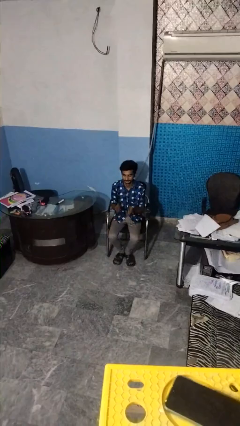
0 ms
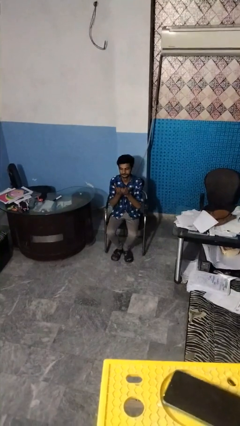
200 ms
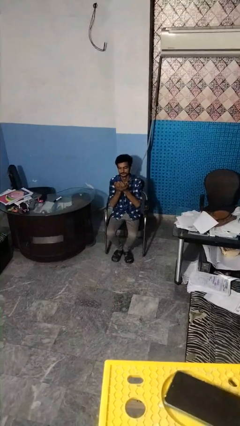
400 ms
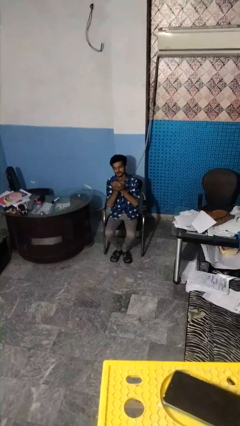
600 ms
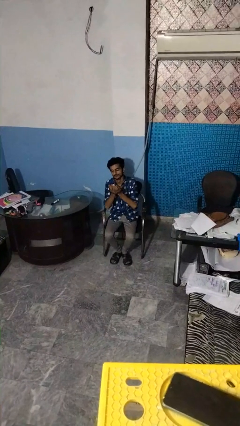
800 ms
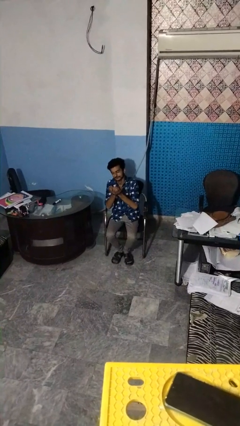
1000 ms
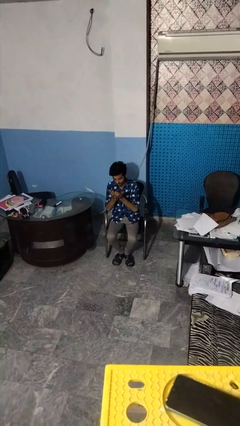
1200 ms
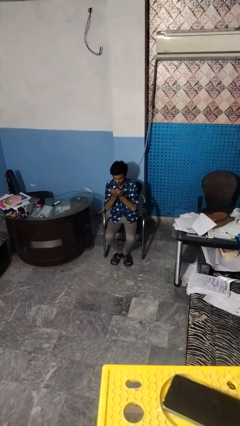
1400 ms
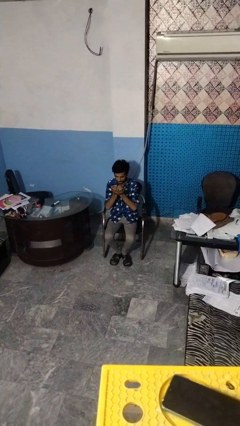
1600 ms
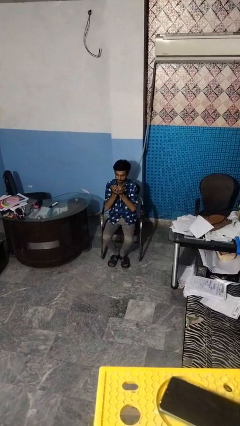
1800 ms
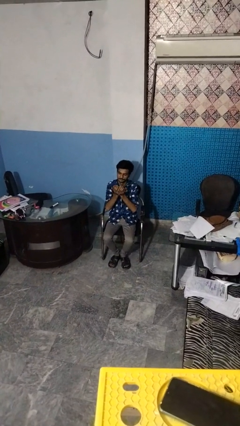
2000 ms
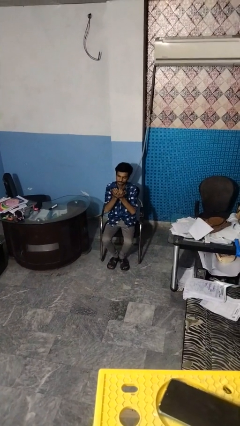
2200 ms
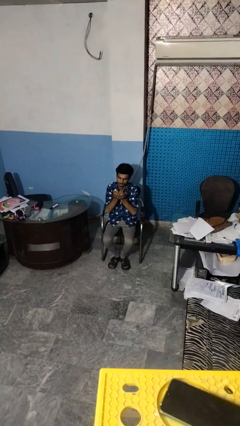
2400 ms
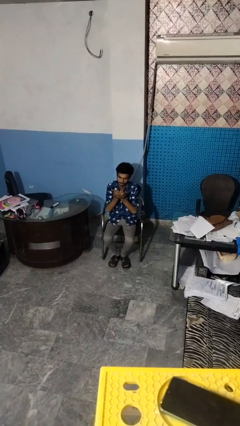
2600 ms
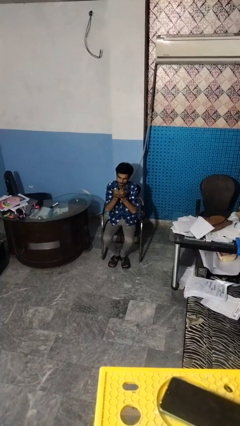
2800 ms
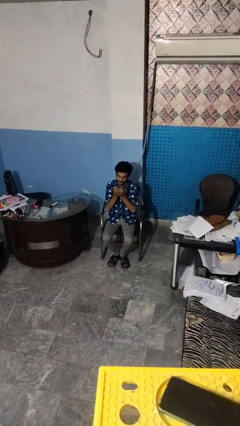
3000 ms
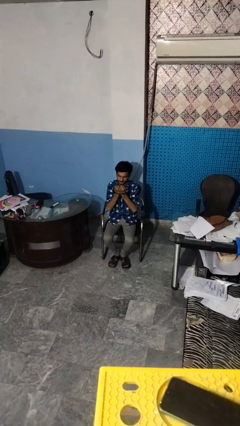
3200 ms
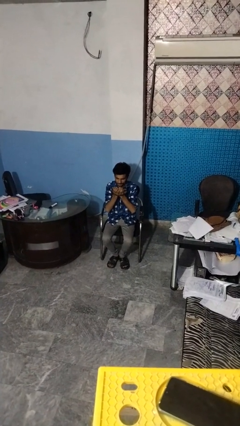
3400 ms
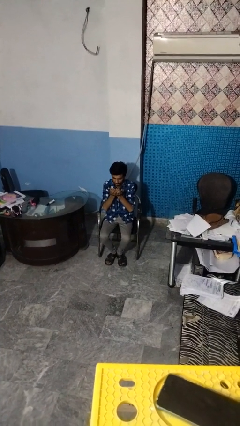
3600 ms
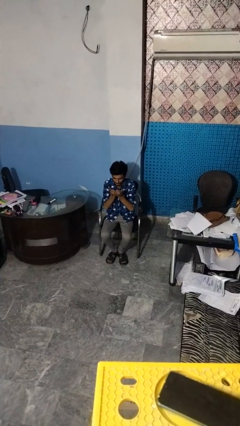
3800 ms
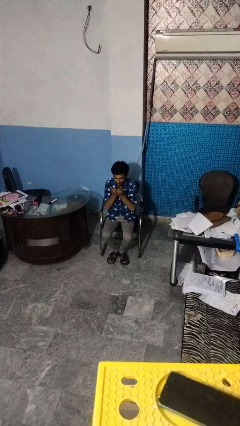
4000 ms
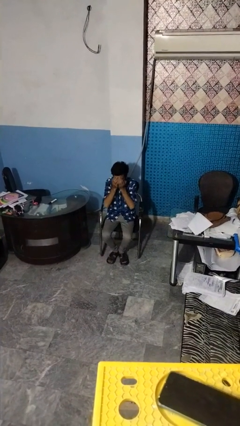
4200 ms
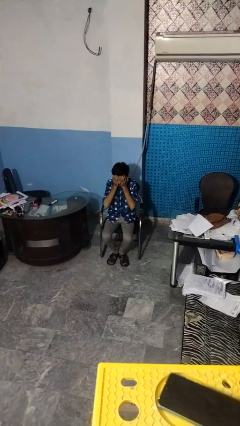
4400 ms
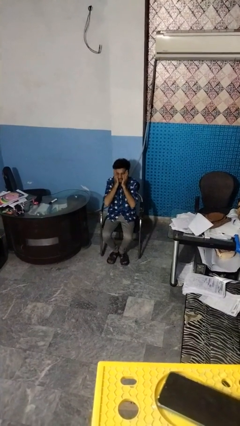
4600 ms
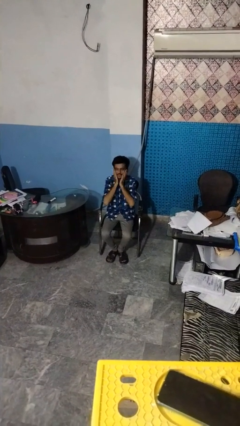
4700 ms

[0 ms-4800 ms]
person prays

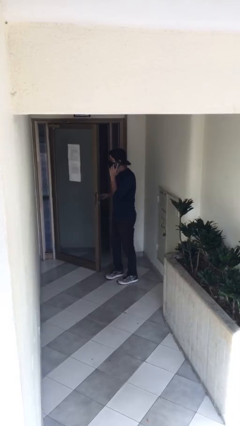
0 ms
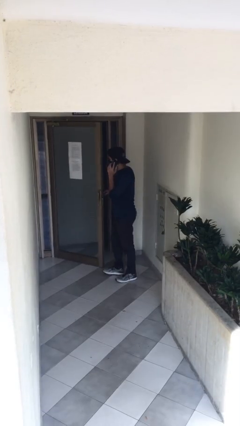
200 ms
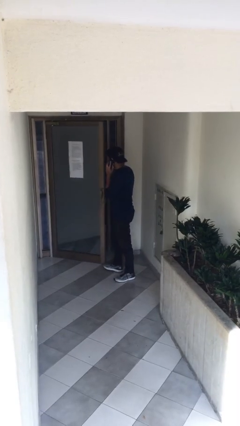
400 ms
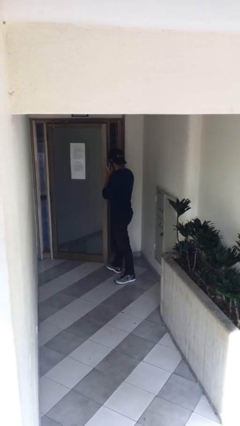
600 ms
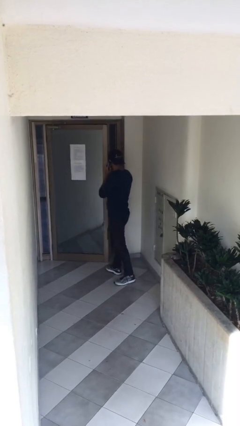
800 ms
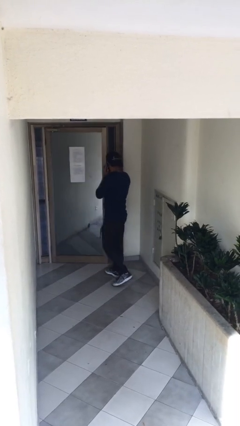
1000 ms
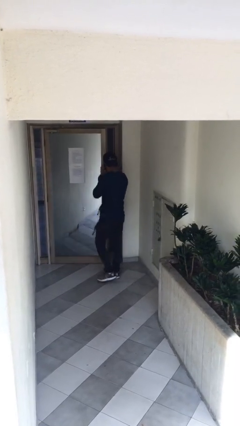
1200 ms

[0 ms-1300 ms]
person closes facility door

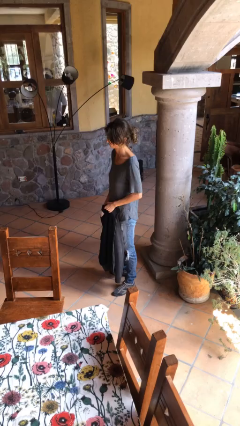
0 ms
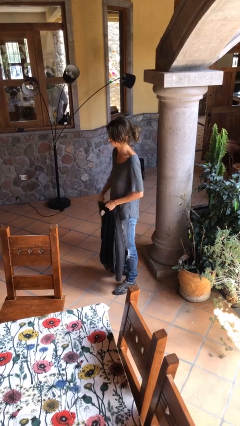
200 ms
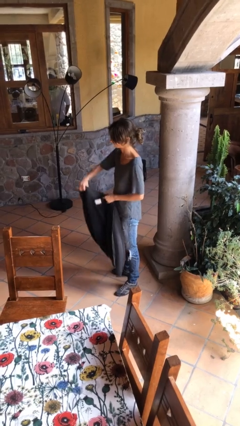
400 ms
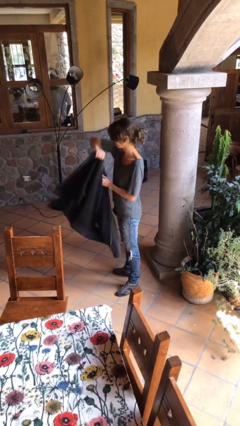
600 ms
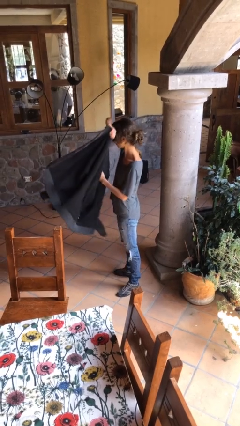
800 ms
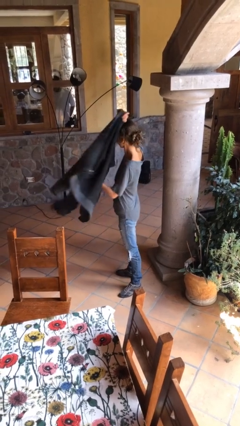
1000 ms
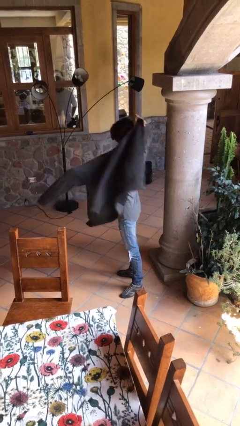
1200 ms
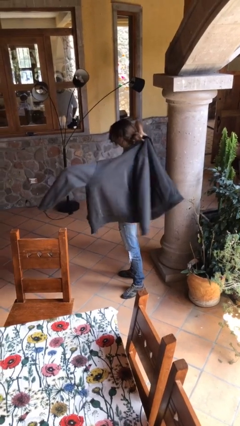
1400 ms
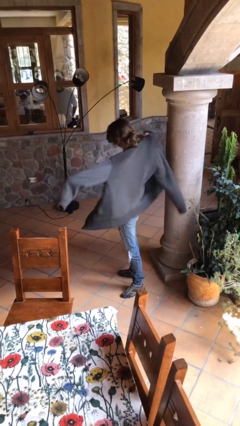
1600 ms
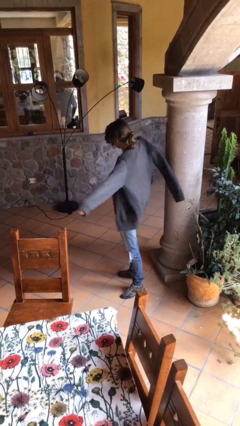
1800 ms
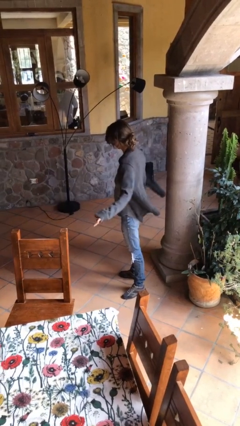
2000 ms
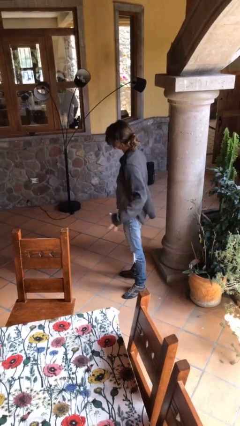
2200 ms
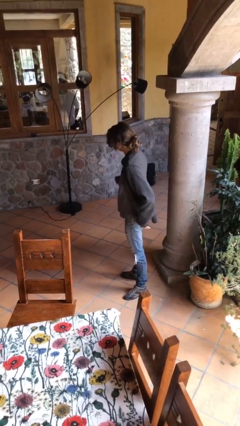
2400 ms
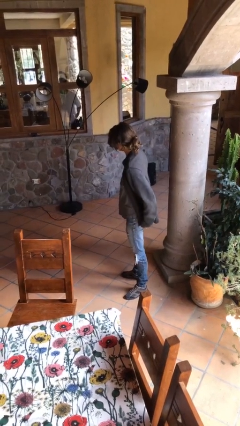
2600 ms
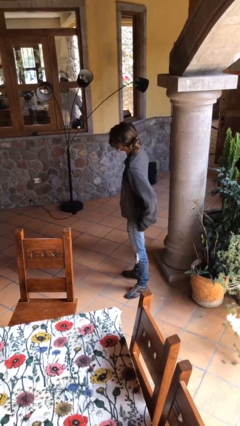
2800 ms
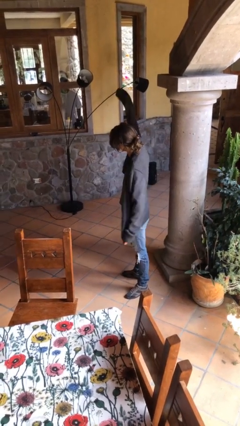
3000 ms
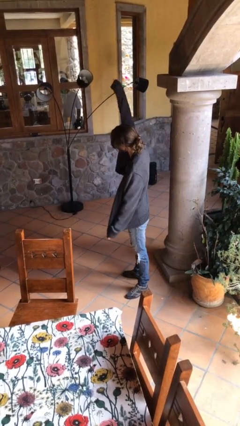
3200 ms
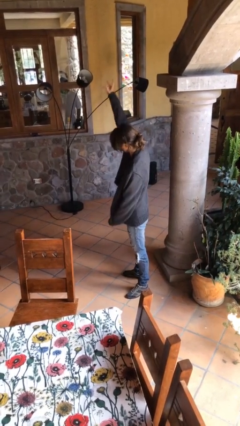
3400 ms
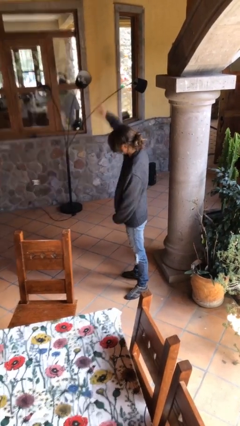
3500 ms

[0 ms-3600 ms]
person puts on jacket

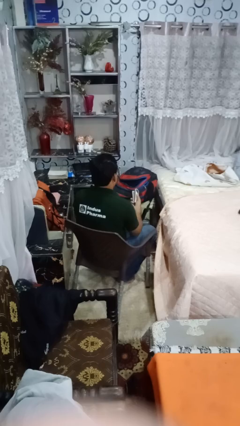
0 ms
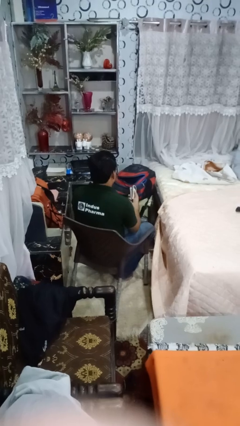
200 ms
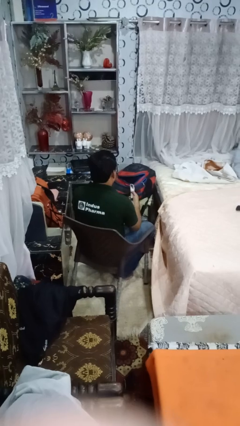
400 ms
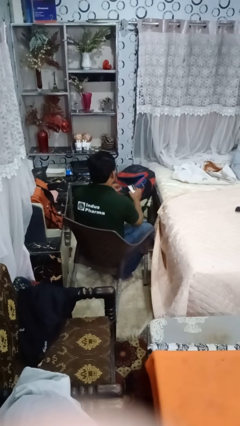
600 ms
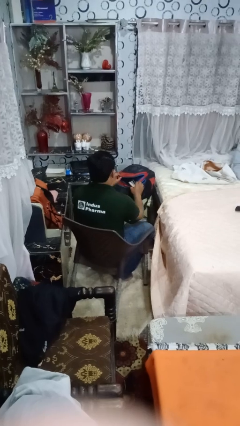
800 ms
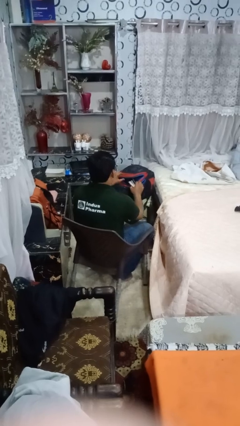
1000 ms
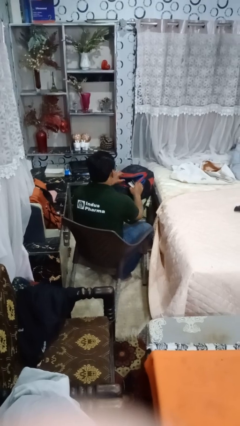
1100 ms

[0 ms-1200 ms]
person takes object from backpack

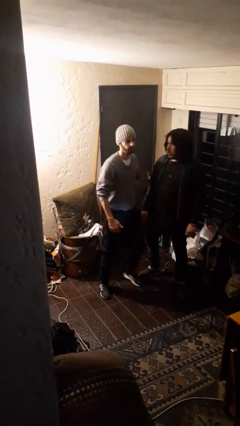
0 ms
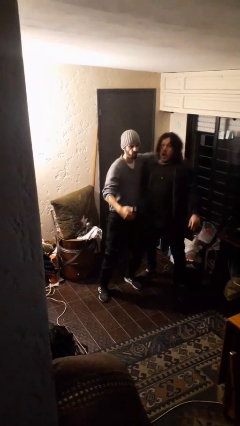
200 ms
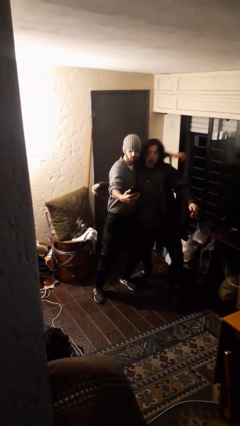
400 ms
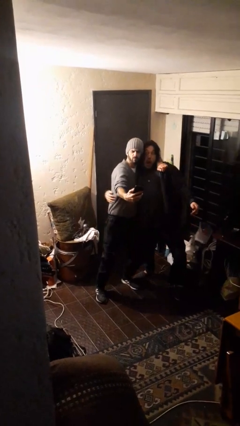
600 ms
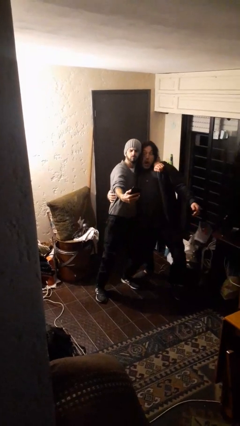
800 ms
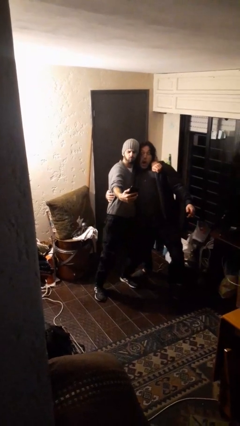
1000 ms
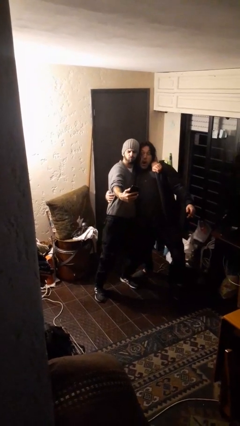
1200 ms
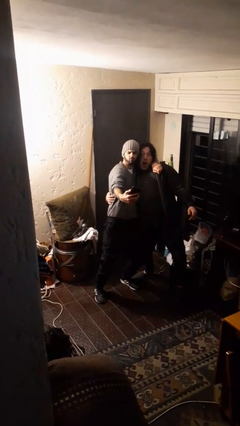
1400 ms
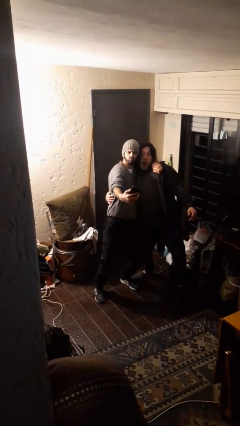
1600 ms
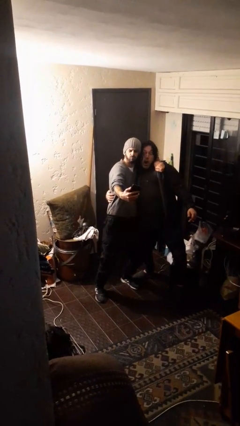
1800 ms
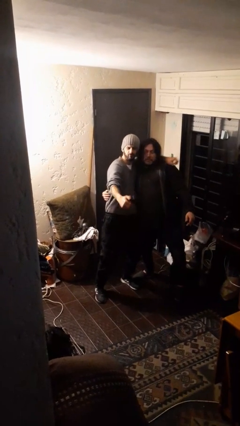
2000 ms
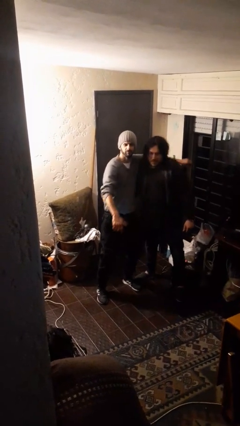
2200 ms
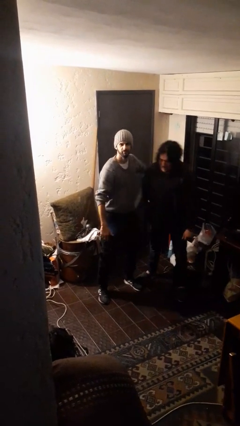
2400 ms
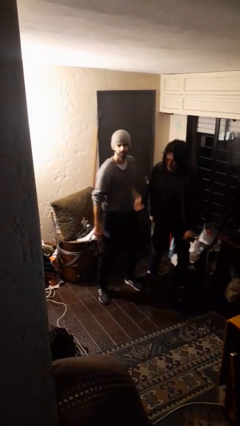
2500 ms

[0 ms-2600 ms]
person takes selfie with person

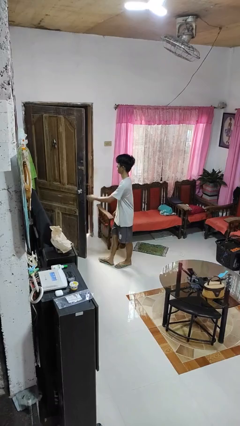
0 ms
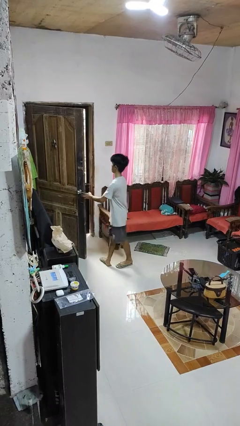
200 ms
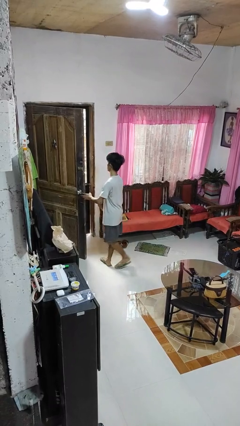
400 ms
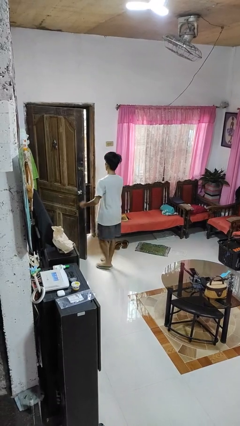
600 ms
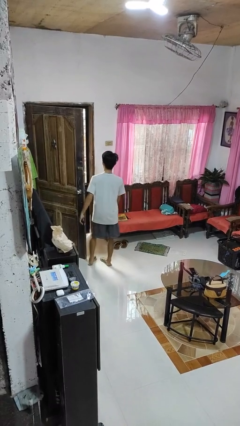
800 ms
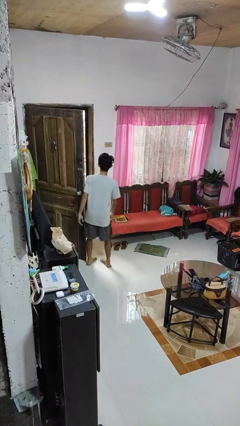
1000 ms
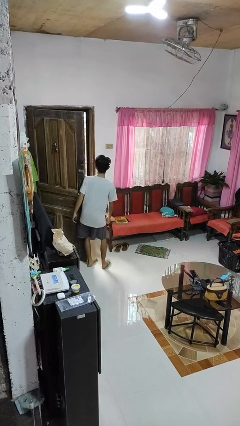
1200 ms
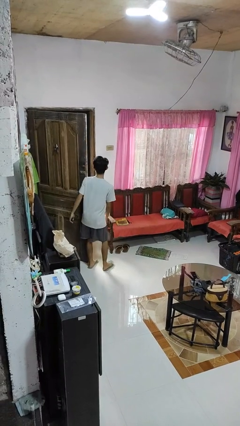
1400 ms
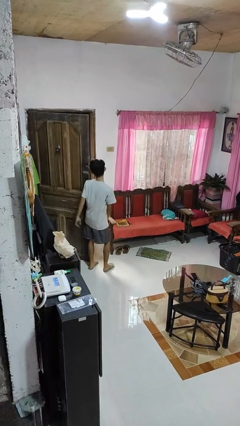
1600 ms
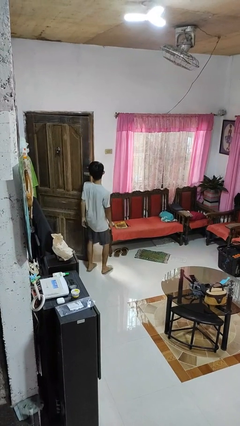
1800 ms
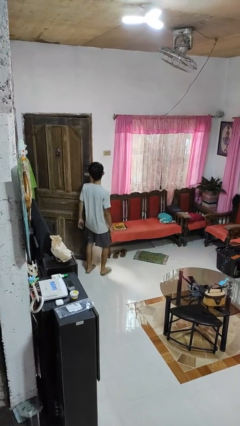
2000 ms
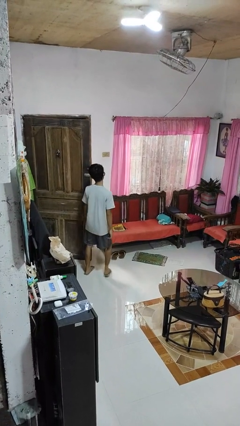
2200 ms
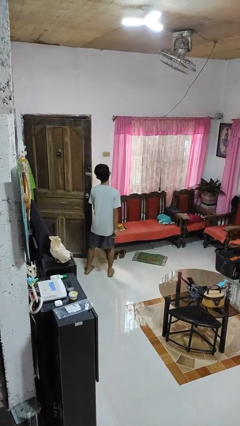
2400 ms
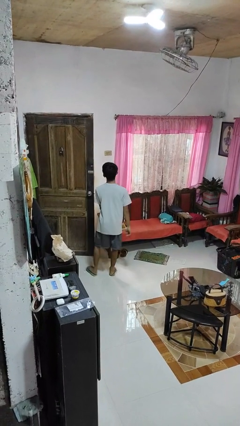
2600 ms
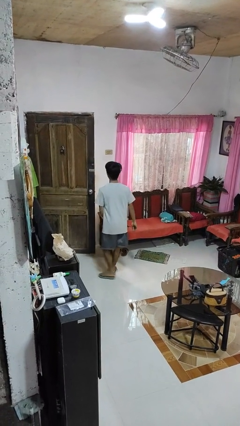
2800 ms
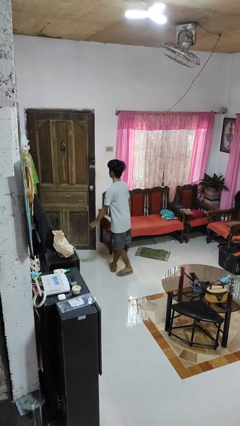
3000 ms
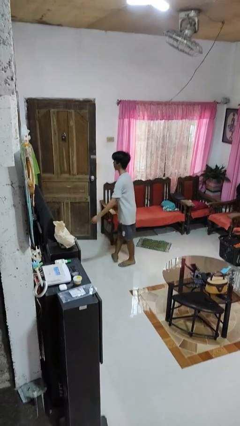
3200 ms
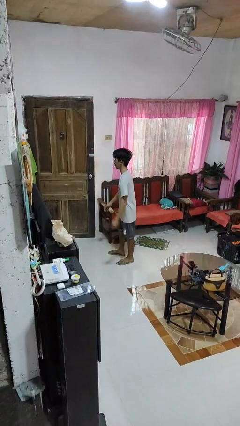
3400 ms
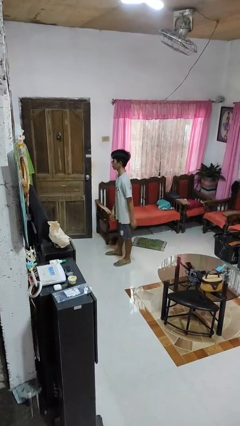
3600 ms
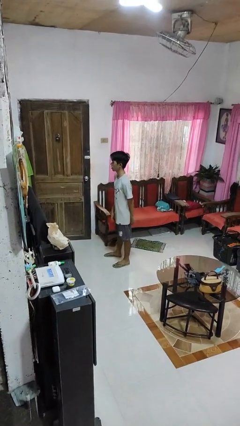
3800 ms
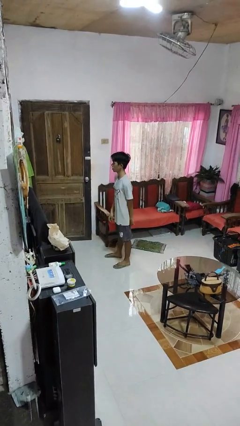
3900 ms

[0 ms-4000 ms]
person closes door with hip

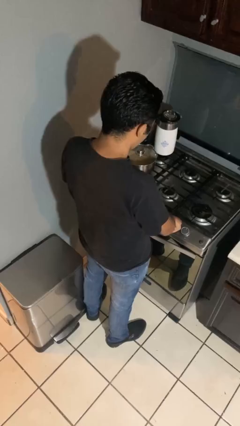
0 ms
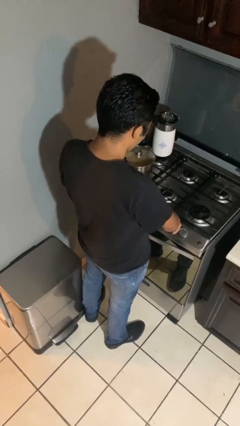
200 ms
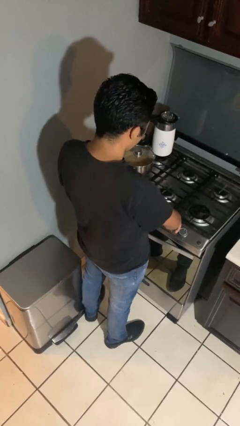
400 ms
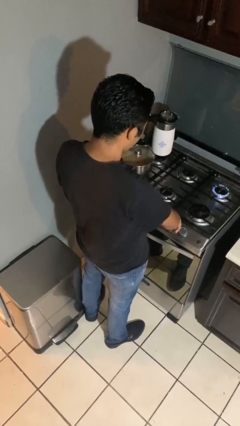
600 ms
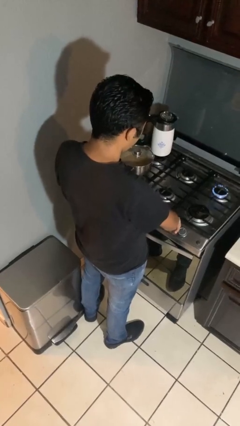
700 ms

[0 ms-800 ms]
person turns on stovetop
